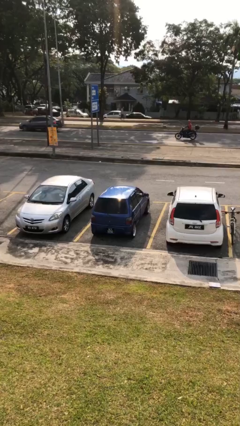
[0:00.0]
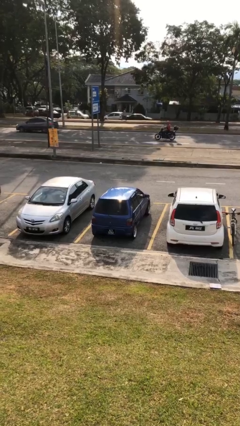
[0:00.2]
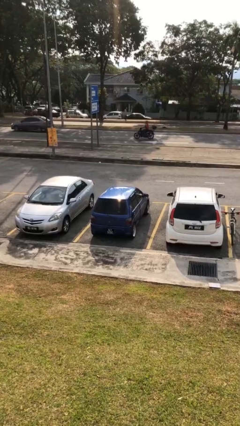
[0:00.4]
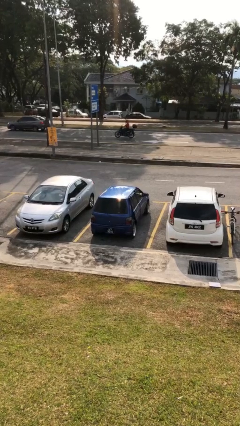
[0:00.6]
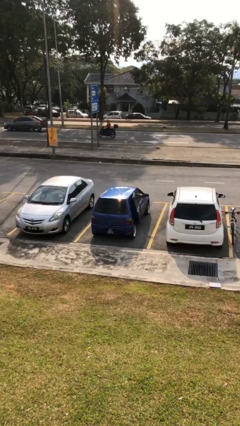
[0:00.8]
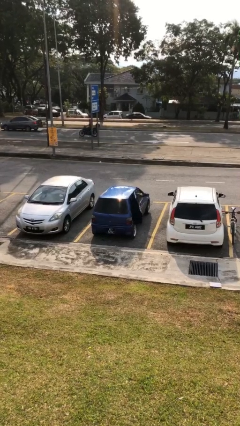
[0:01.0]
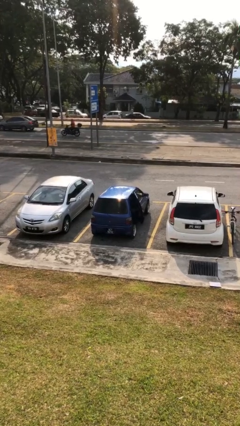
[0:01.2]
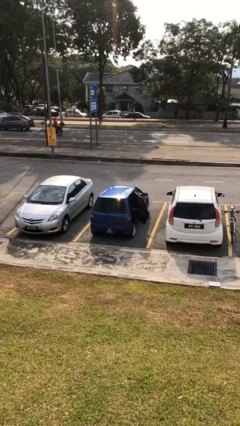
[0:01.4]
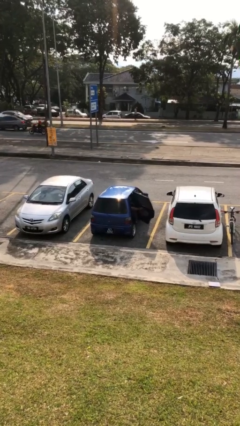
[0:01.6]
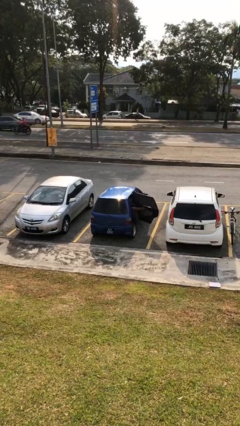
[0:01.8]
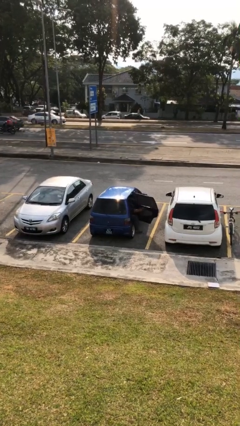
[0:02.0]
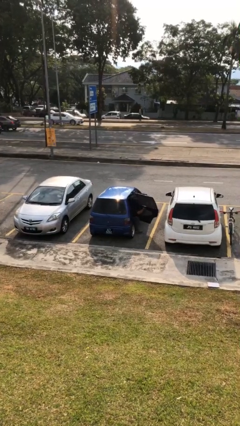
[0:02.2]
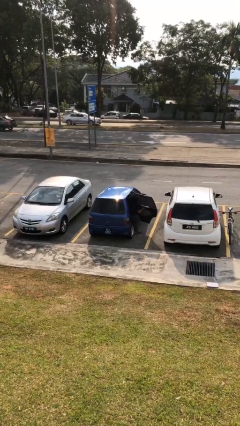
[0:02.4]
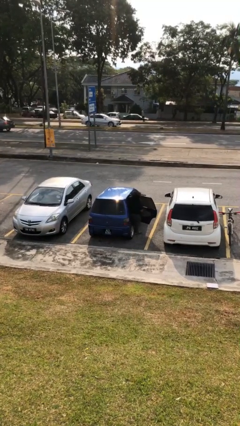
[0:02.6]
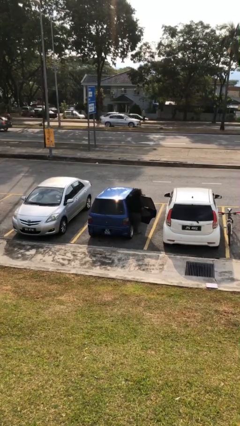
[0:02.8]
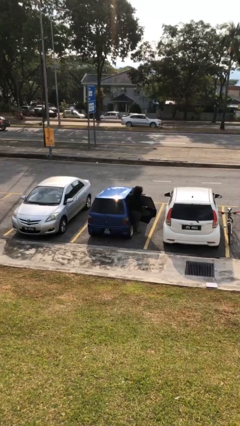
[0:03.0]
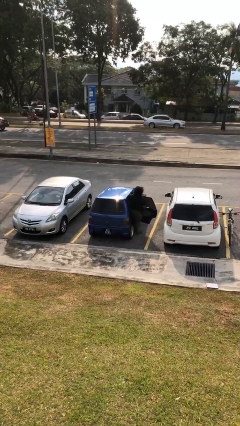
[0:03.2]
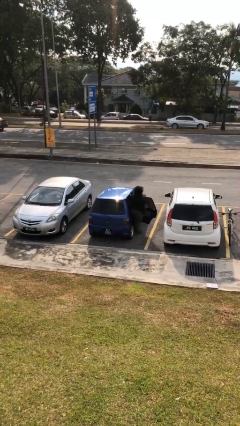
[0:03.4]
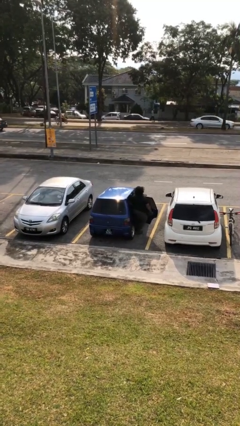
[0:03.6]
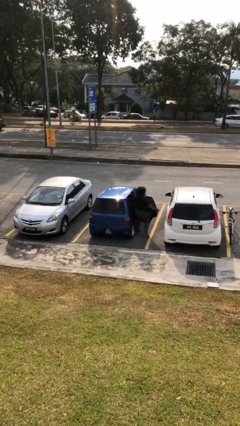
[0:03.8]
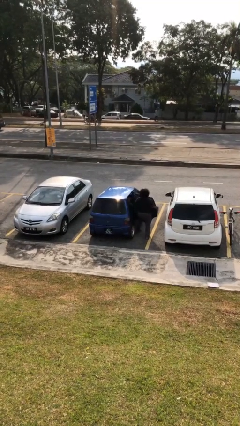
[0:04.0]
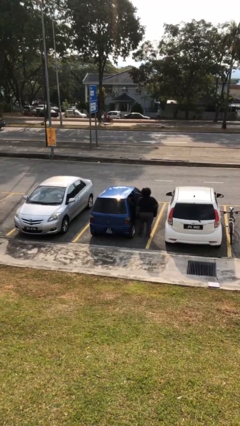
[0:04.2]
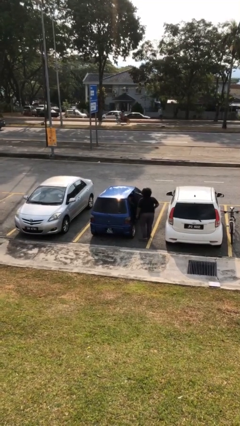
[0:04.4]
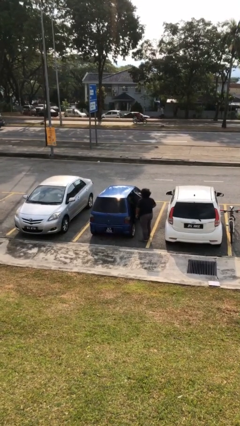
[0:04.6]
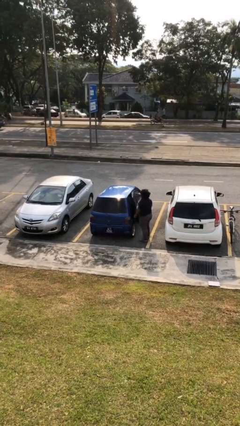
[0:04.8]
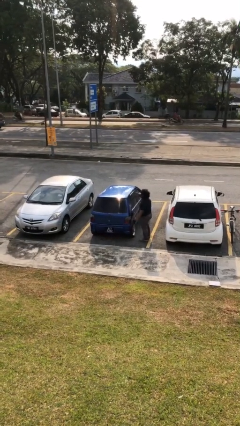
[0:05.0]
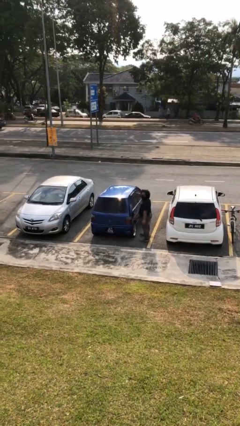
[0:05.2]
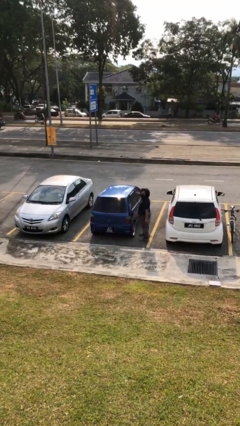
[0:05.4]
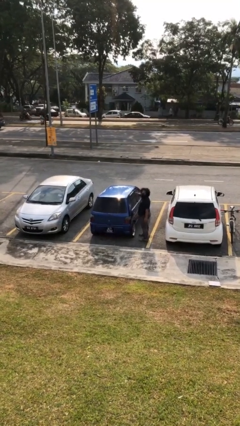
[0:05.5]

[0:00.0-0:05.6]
car drops off person

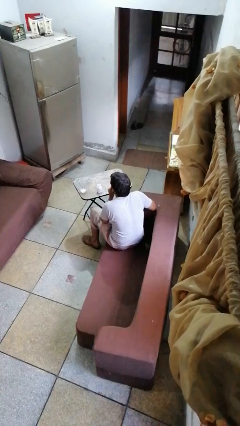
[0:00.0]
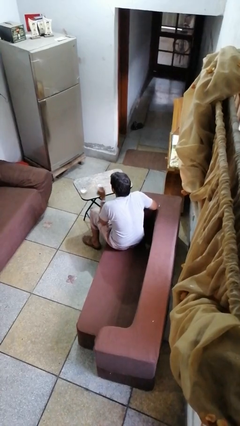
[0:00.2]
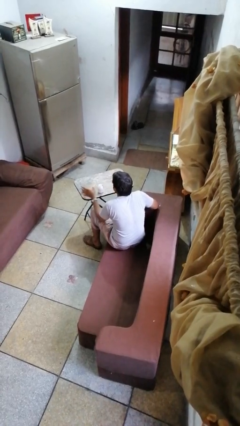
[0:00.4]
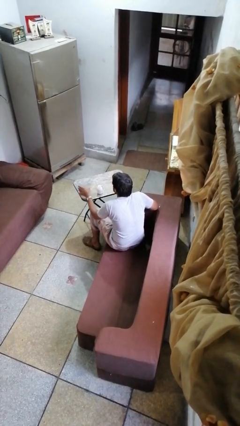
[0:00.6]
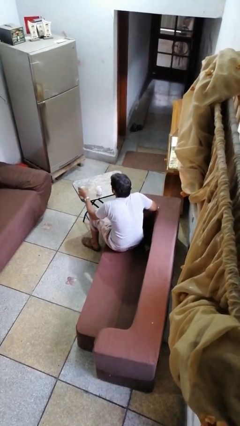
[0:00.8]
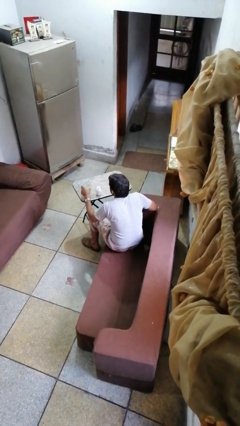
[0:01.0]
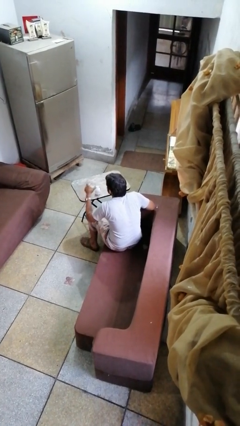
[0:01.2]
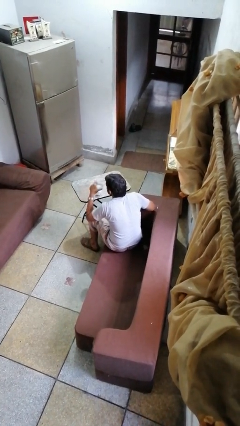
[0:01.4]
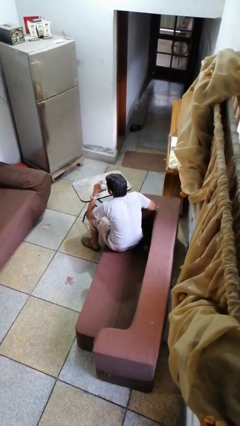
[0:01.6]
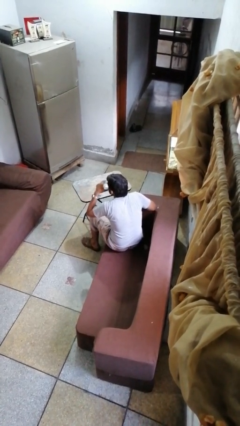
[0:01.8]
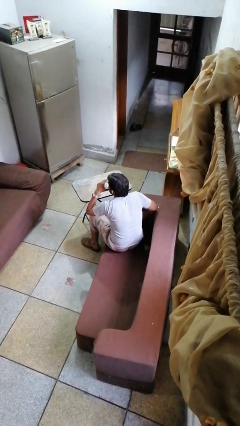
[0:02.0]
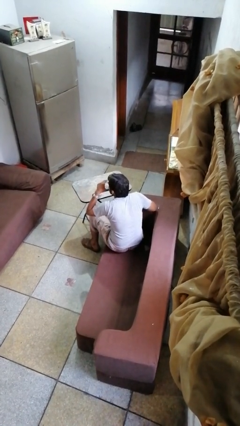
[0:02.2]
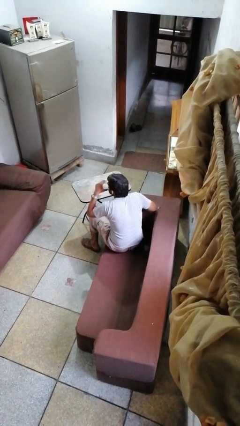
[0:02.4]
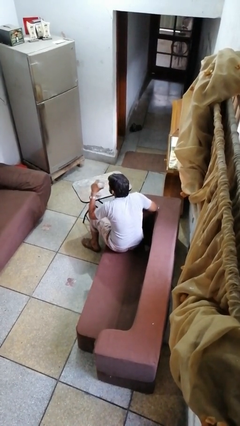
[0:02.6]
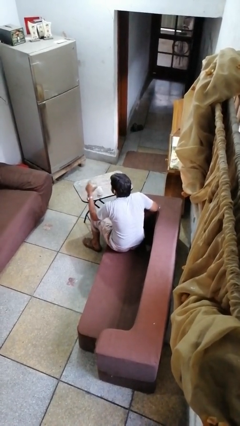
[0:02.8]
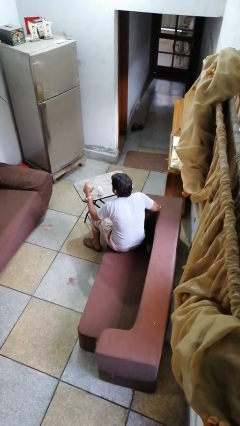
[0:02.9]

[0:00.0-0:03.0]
person drinks from cup

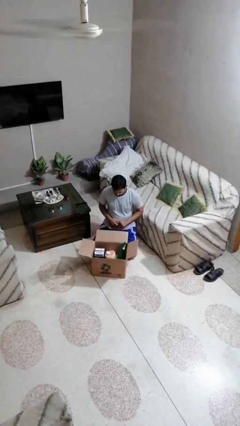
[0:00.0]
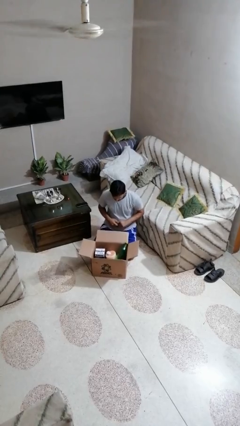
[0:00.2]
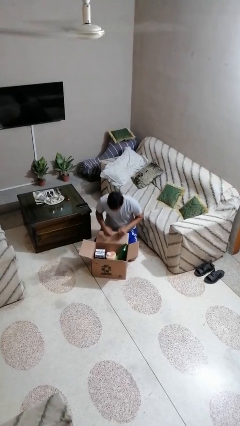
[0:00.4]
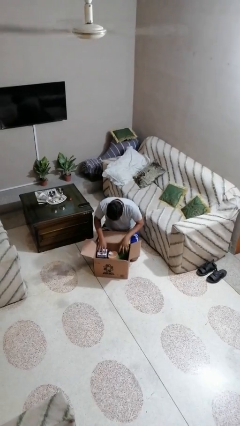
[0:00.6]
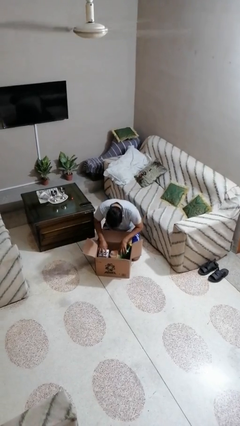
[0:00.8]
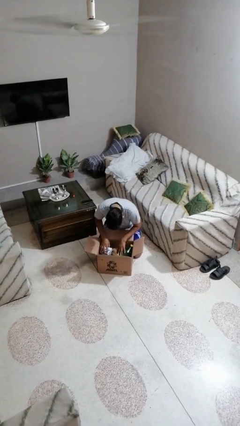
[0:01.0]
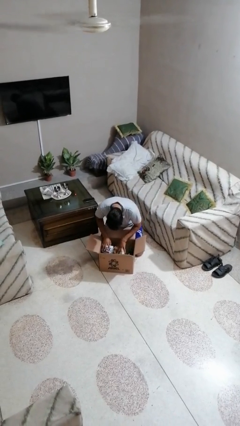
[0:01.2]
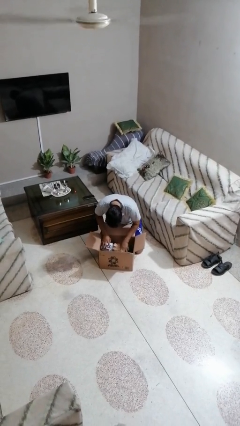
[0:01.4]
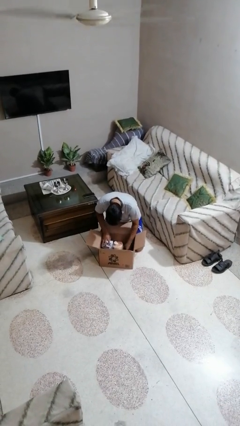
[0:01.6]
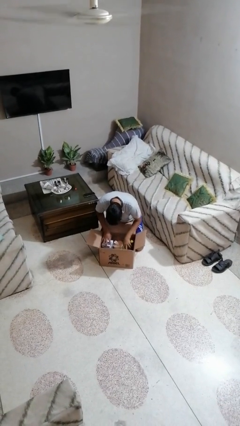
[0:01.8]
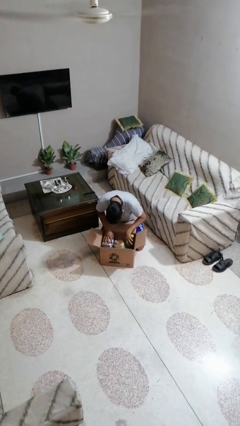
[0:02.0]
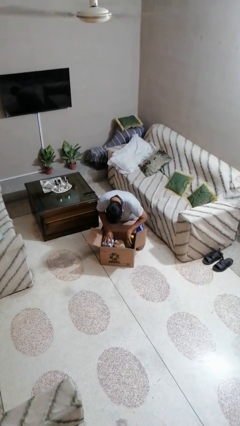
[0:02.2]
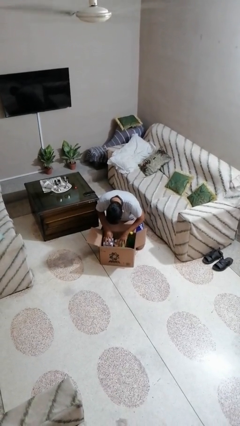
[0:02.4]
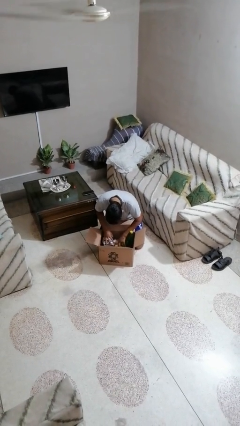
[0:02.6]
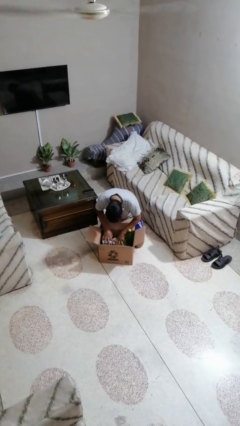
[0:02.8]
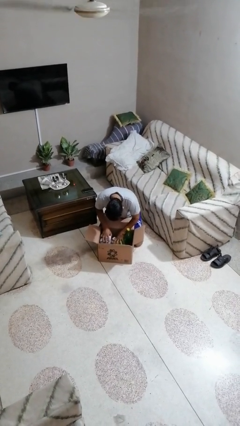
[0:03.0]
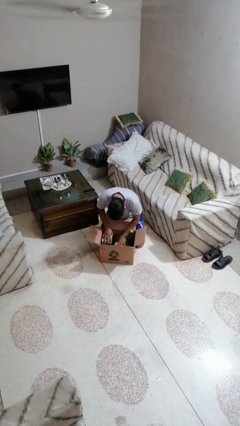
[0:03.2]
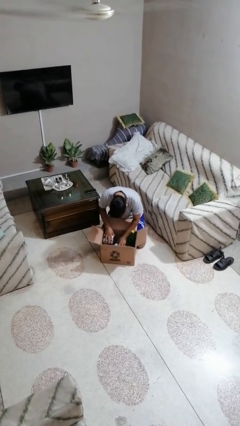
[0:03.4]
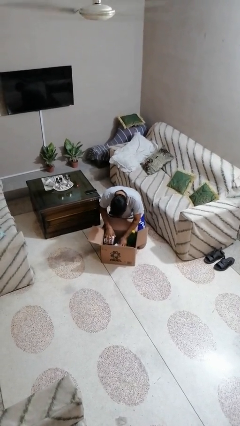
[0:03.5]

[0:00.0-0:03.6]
person searches in box

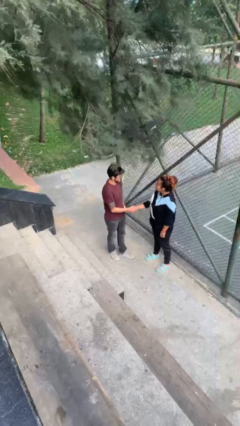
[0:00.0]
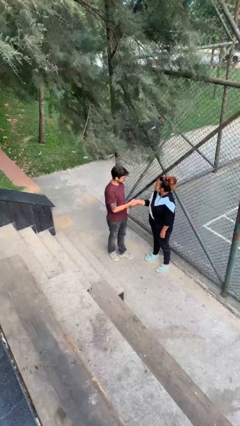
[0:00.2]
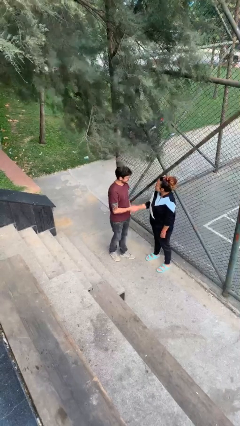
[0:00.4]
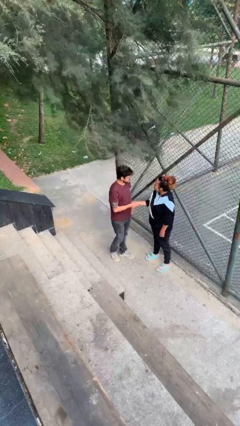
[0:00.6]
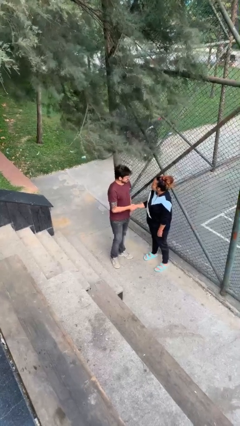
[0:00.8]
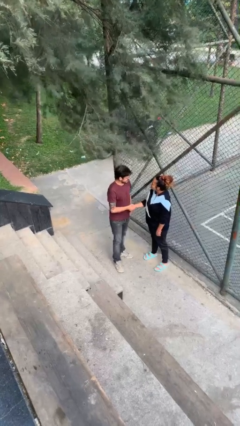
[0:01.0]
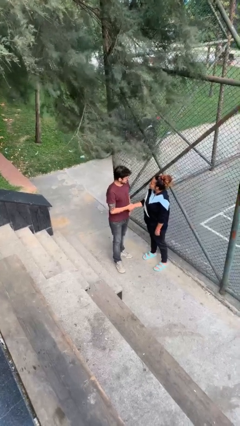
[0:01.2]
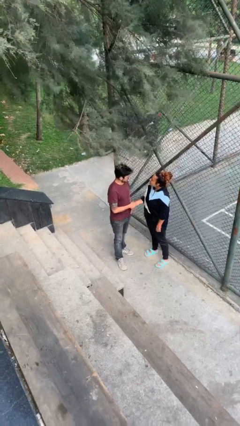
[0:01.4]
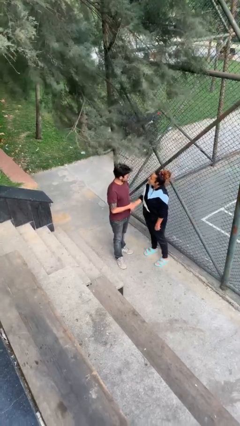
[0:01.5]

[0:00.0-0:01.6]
person shakes hand

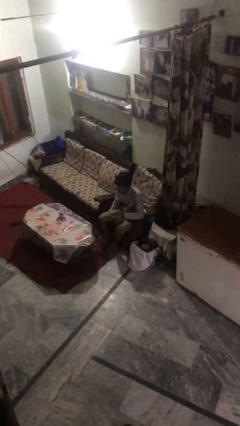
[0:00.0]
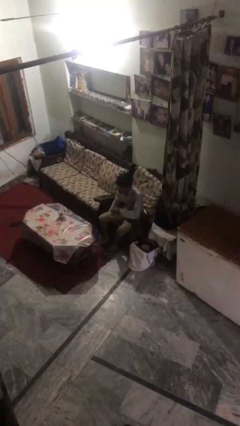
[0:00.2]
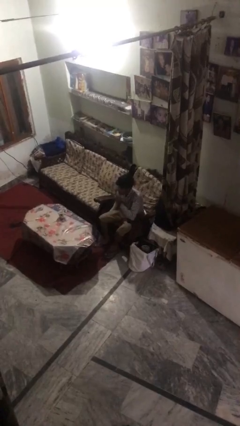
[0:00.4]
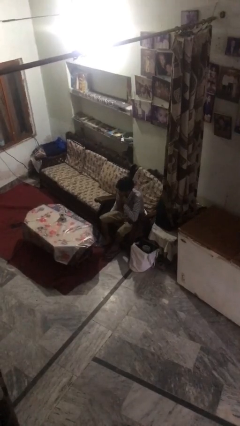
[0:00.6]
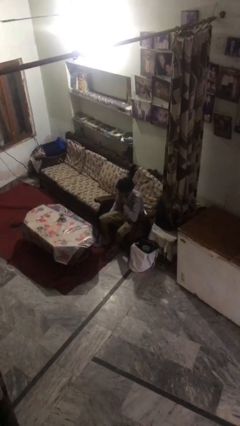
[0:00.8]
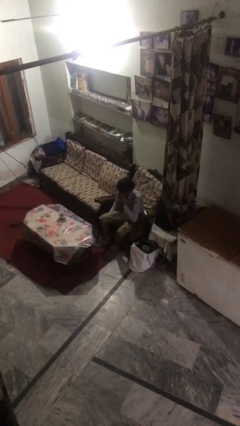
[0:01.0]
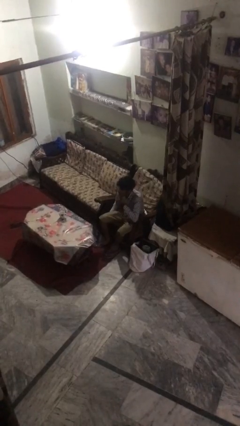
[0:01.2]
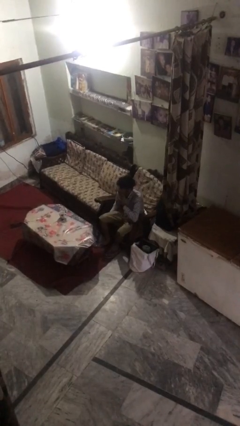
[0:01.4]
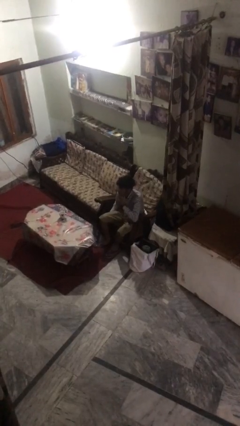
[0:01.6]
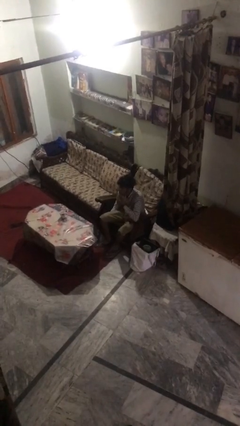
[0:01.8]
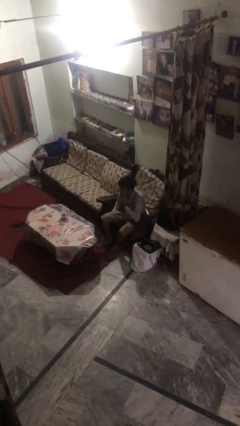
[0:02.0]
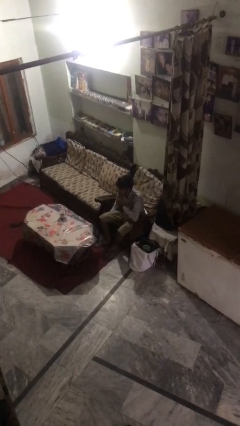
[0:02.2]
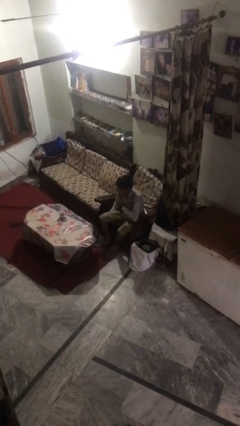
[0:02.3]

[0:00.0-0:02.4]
person strokes chin

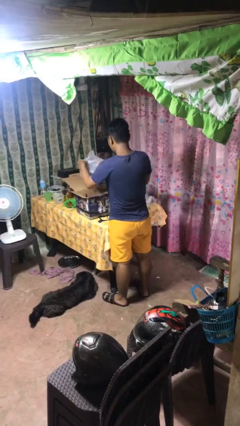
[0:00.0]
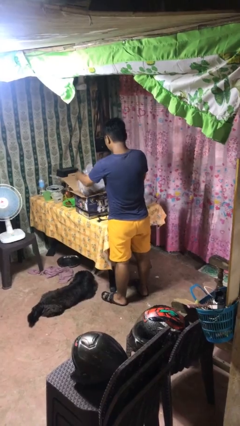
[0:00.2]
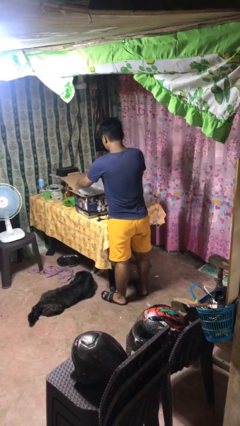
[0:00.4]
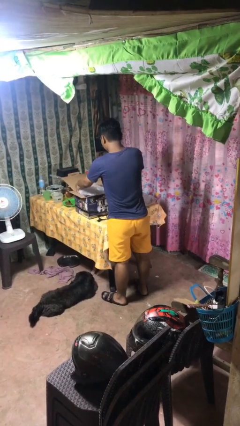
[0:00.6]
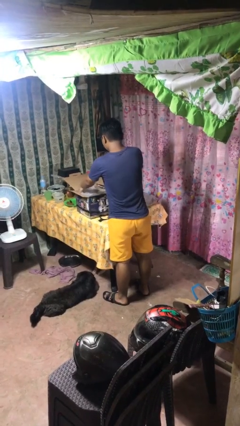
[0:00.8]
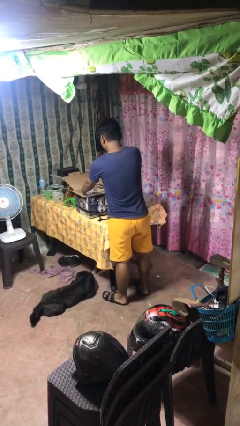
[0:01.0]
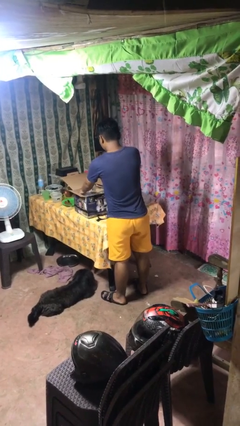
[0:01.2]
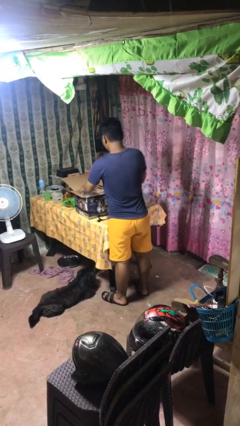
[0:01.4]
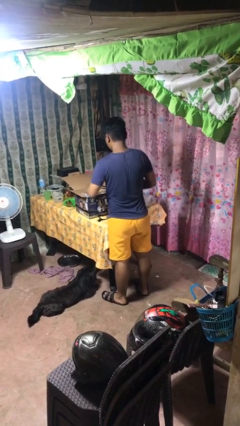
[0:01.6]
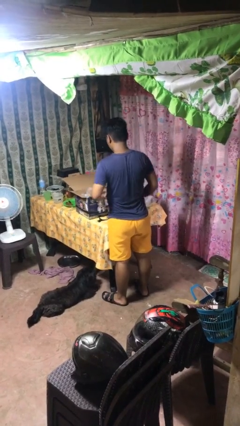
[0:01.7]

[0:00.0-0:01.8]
person puts object into box
